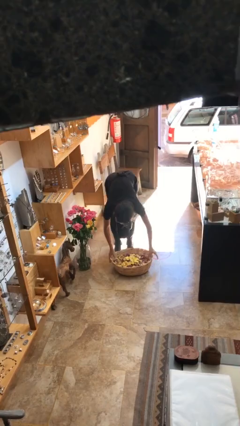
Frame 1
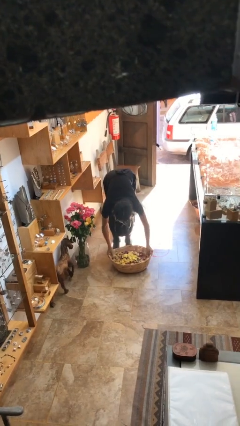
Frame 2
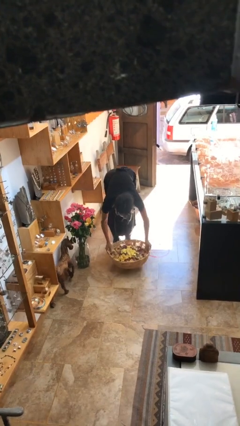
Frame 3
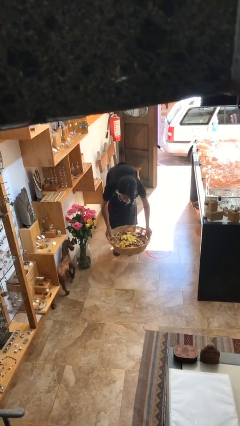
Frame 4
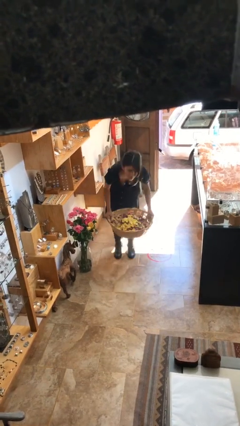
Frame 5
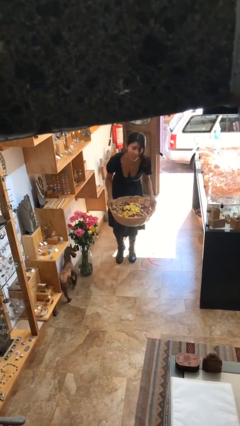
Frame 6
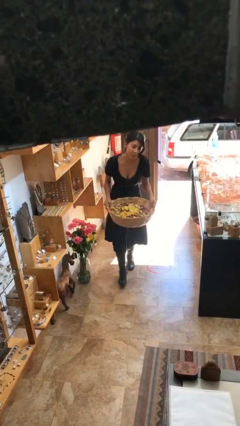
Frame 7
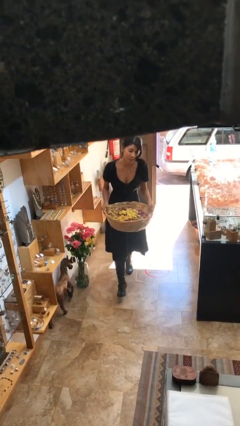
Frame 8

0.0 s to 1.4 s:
person picks up object from floor

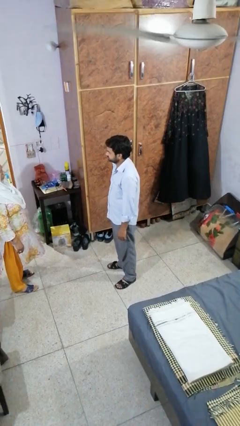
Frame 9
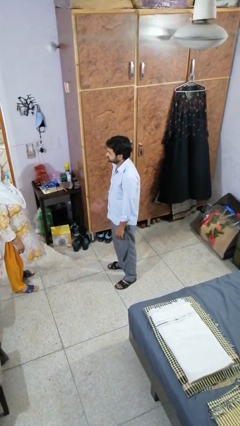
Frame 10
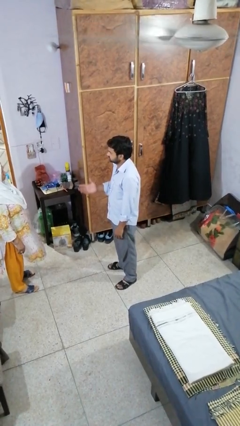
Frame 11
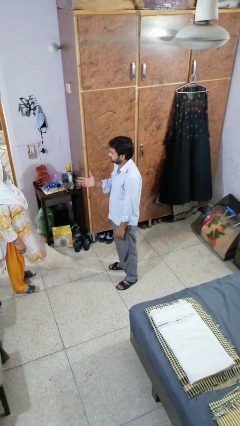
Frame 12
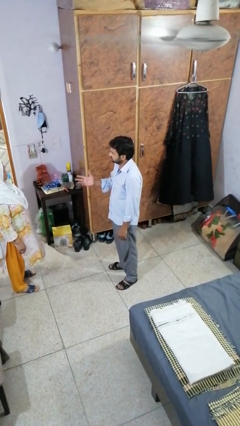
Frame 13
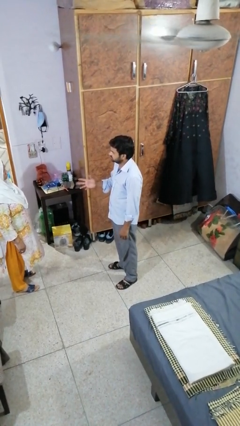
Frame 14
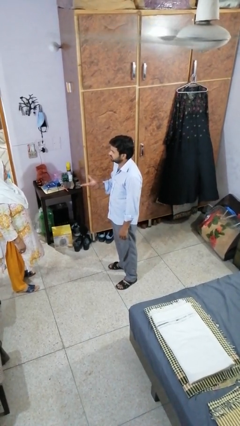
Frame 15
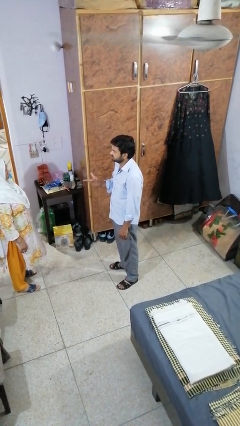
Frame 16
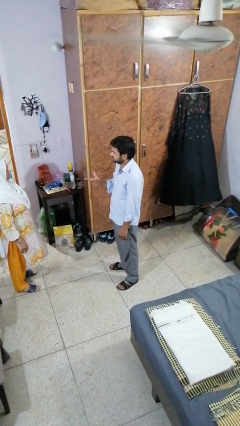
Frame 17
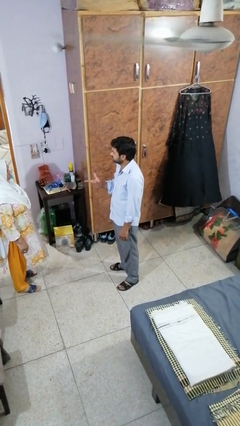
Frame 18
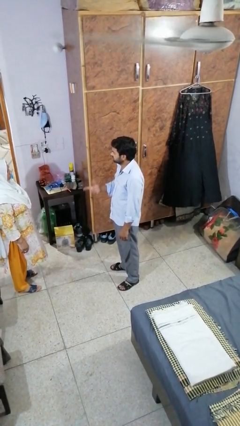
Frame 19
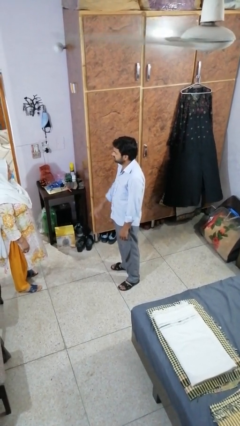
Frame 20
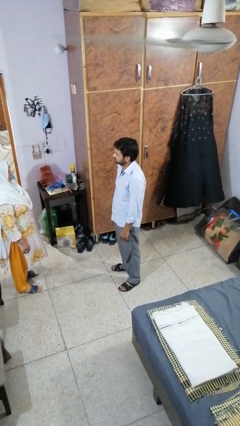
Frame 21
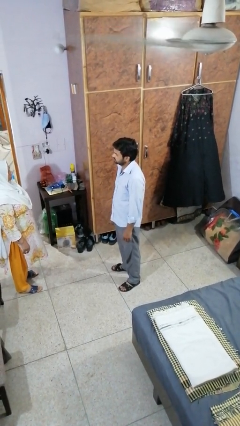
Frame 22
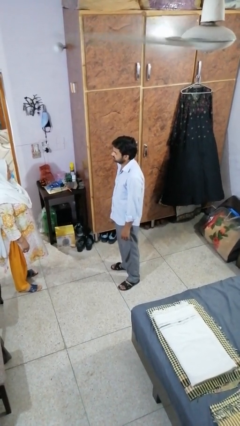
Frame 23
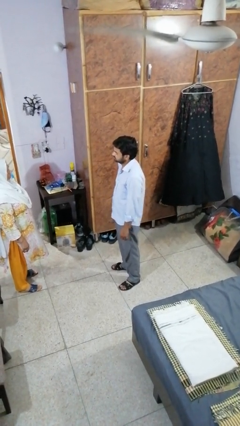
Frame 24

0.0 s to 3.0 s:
person talks to person

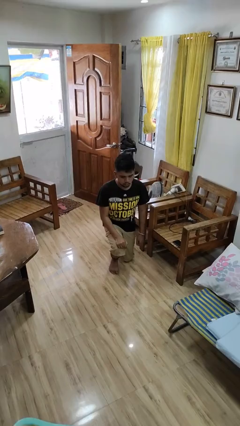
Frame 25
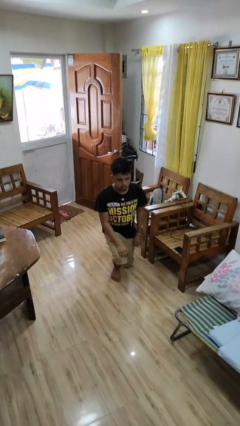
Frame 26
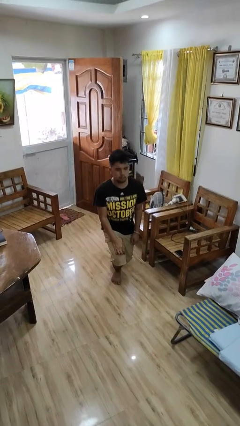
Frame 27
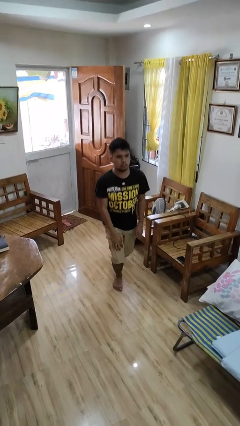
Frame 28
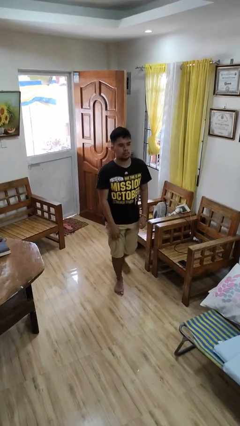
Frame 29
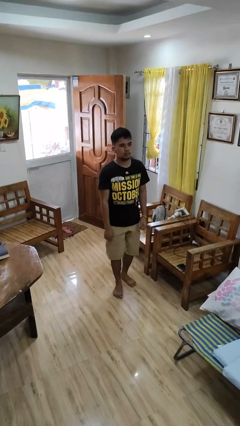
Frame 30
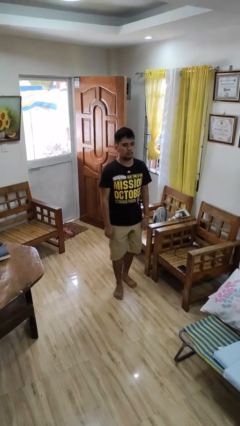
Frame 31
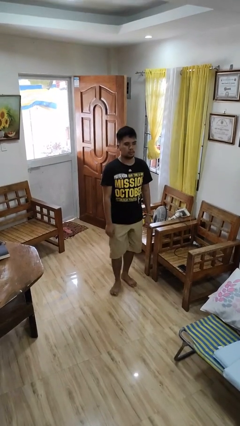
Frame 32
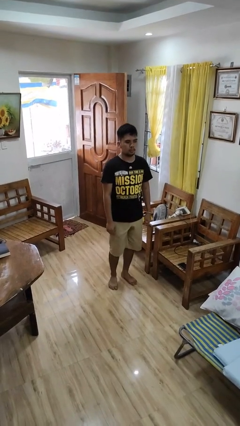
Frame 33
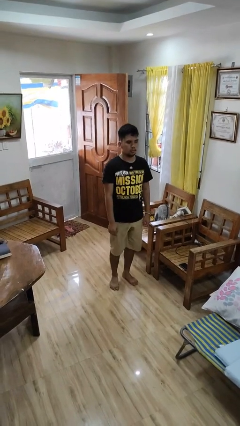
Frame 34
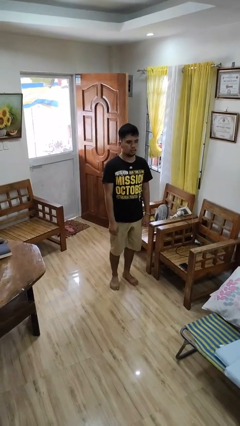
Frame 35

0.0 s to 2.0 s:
person stands up from floor

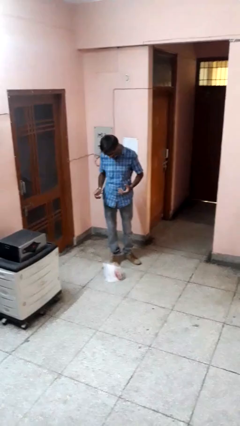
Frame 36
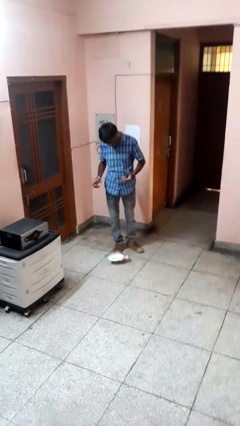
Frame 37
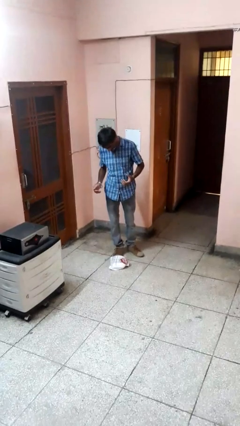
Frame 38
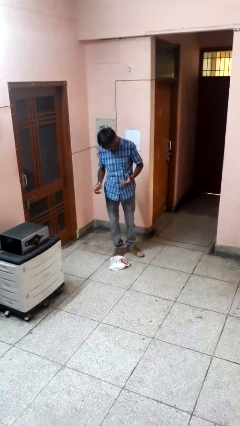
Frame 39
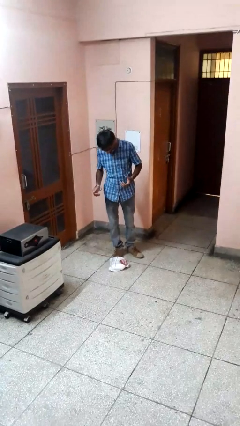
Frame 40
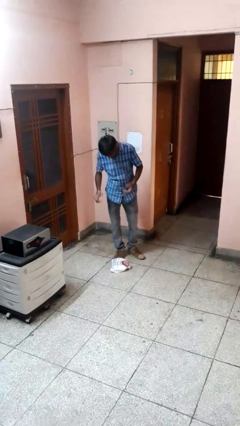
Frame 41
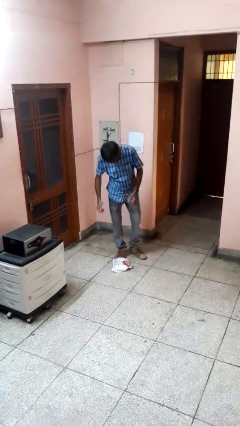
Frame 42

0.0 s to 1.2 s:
person drops object

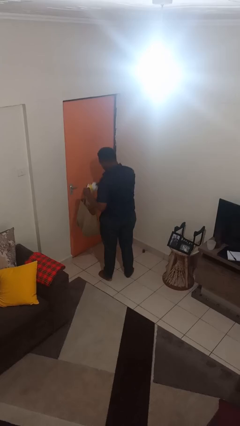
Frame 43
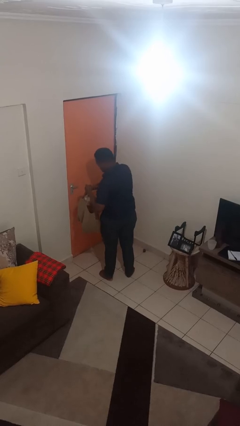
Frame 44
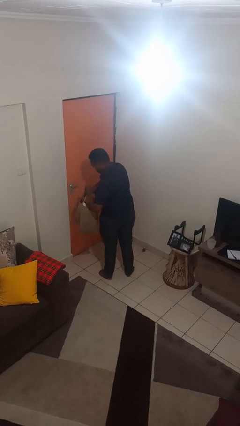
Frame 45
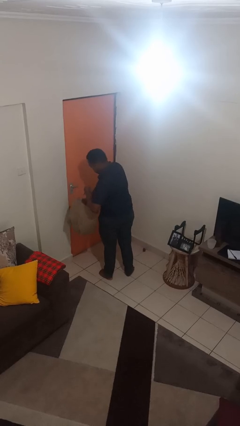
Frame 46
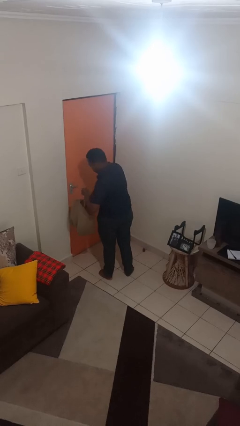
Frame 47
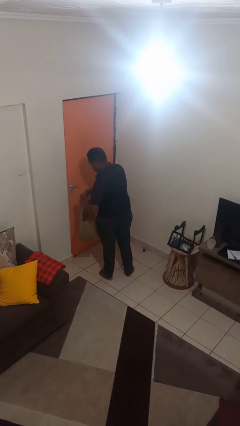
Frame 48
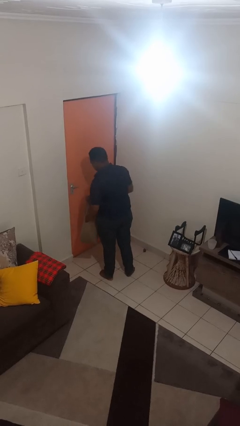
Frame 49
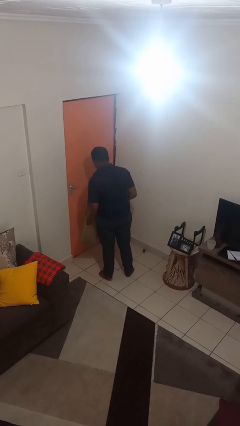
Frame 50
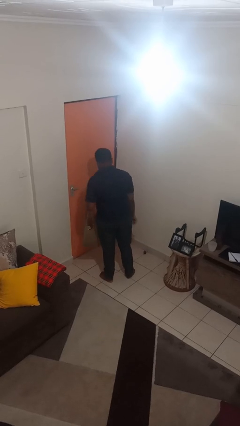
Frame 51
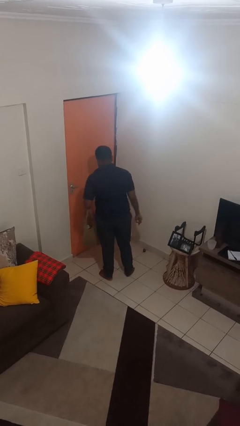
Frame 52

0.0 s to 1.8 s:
person puts object into bag

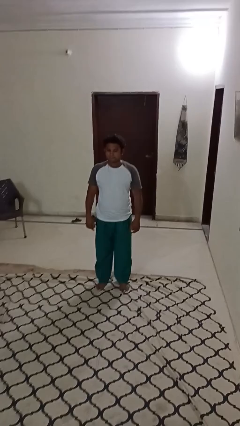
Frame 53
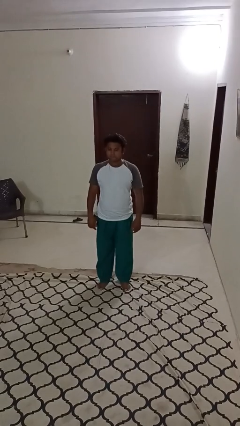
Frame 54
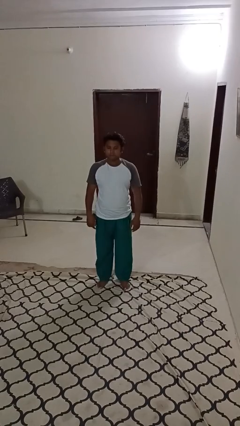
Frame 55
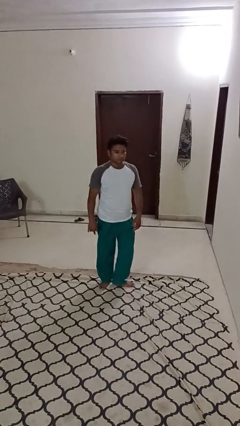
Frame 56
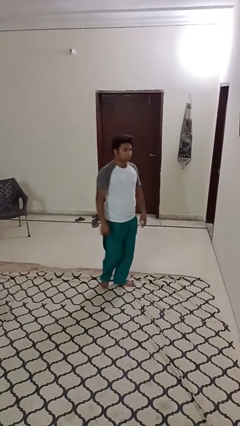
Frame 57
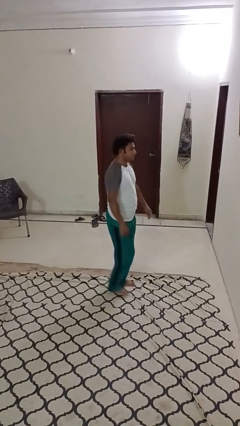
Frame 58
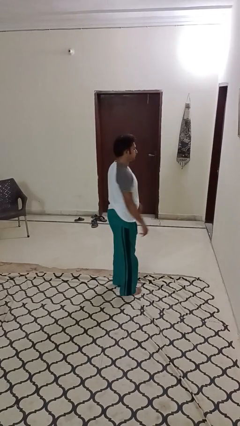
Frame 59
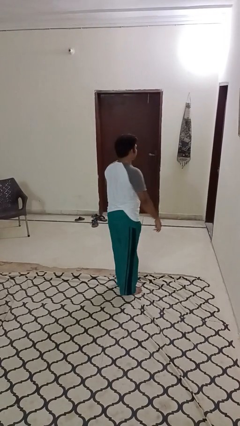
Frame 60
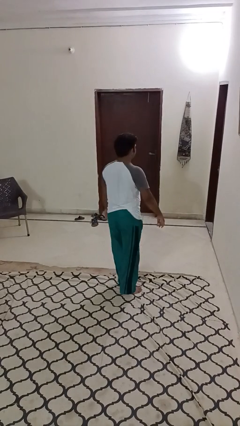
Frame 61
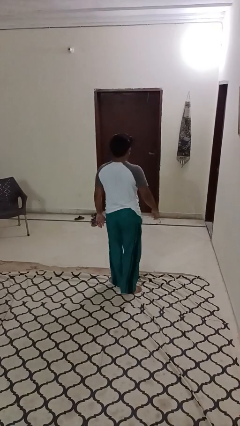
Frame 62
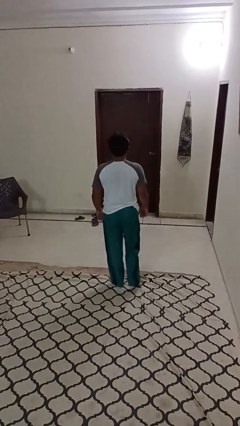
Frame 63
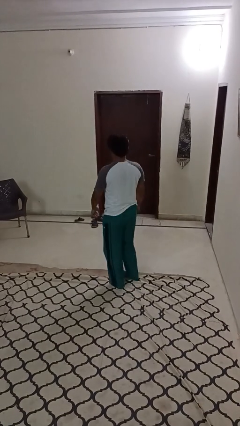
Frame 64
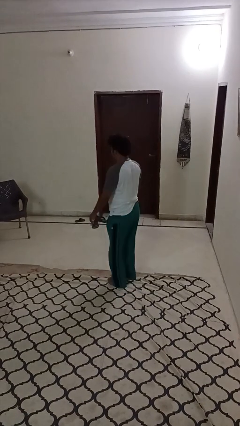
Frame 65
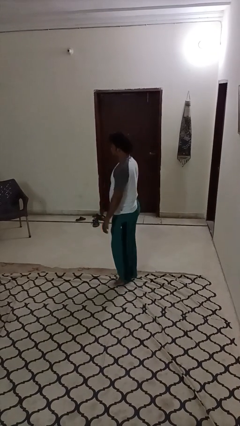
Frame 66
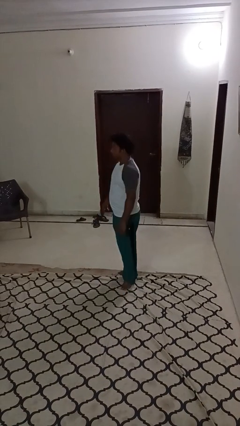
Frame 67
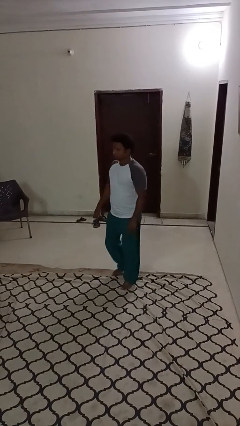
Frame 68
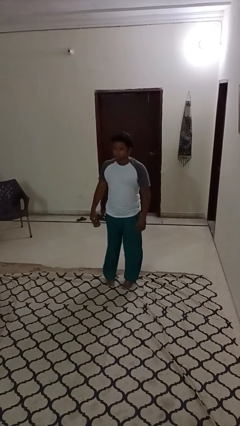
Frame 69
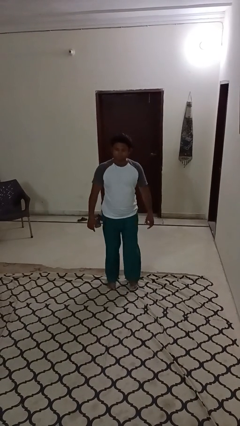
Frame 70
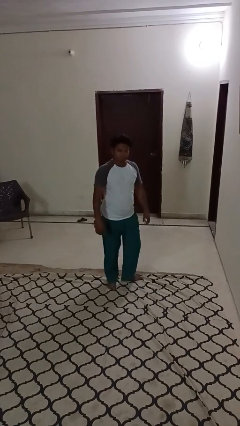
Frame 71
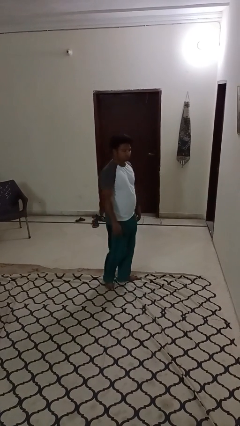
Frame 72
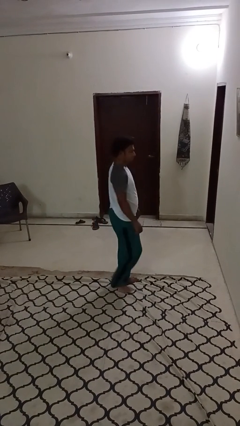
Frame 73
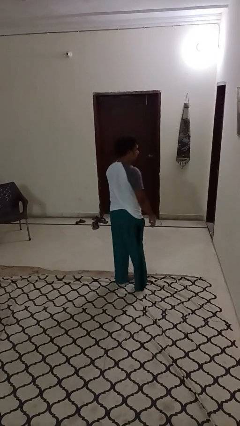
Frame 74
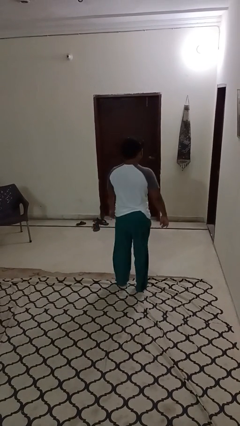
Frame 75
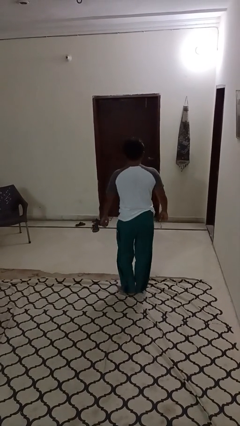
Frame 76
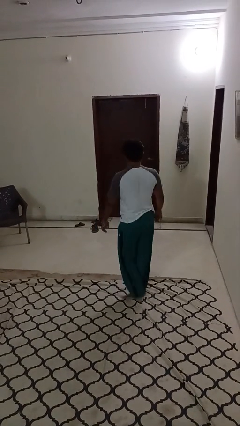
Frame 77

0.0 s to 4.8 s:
person twirls

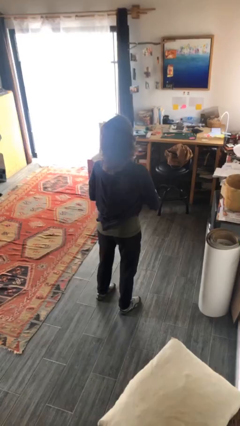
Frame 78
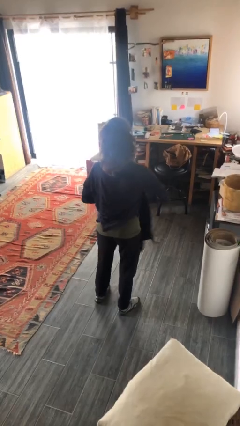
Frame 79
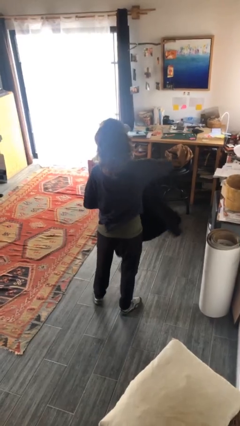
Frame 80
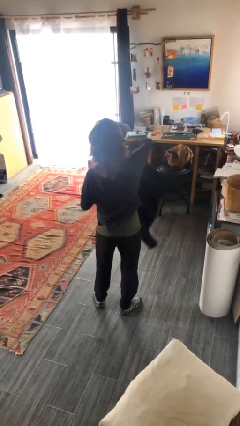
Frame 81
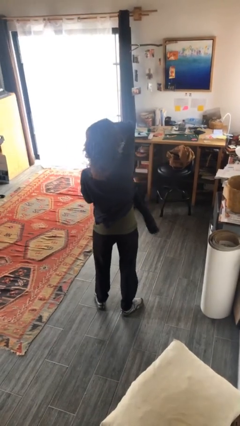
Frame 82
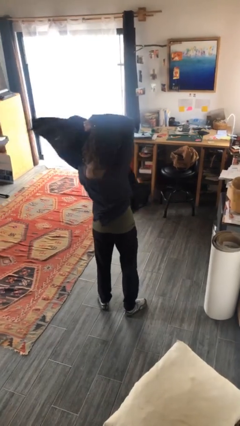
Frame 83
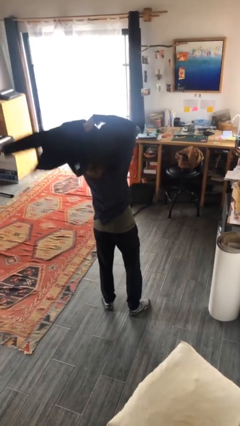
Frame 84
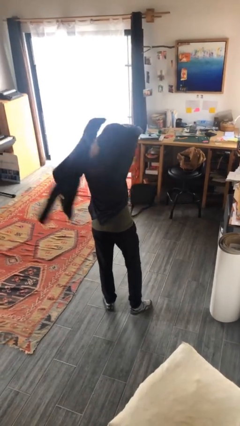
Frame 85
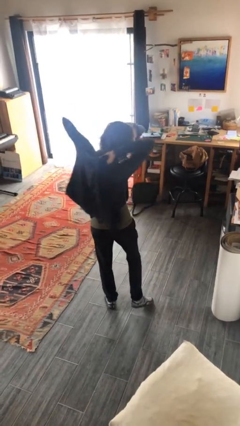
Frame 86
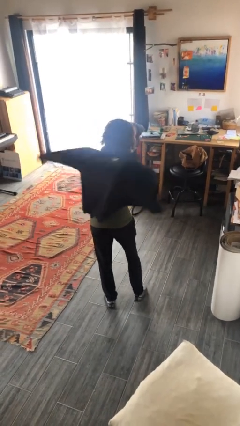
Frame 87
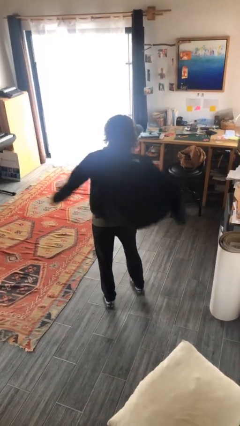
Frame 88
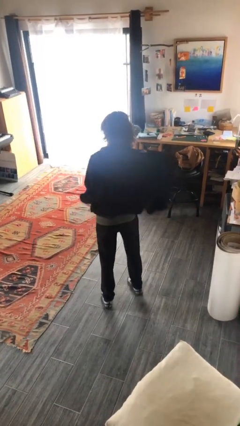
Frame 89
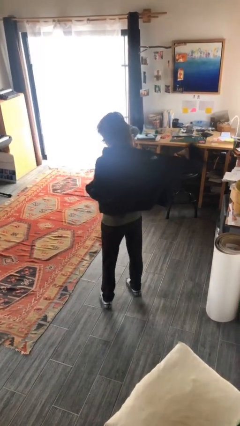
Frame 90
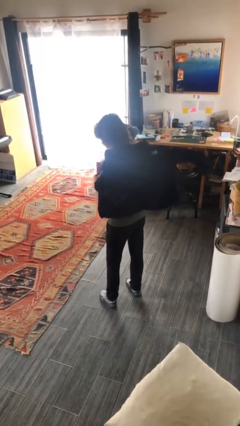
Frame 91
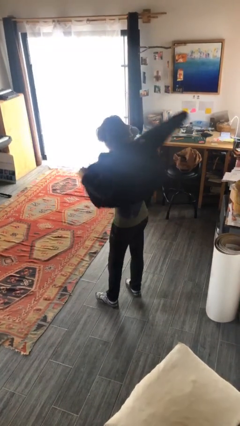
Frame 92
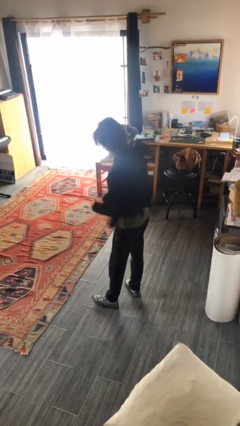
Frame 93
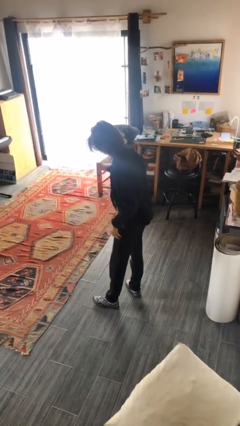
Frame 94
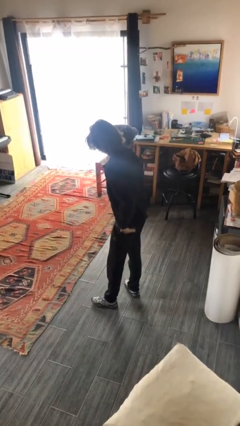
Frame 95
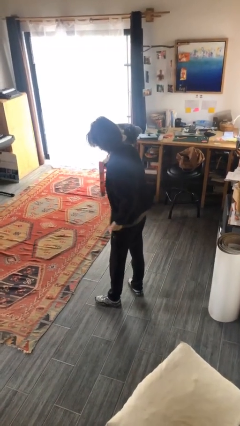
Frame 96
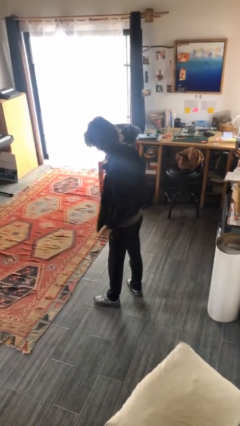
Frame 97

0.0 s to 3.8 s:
person puts on jacket
